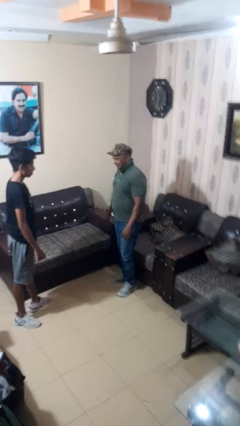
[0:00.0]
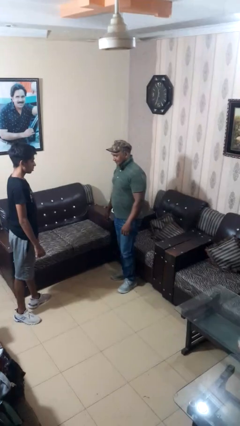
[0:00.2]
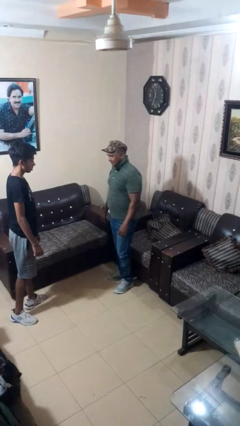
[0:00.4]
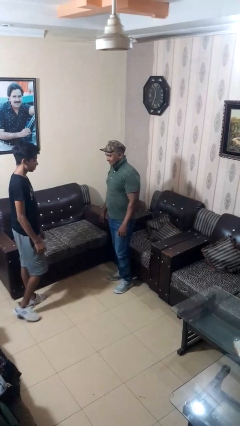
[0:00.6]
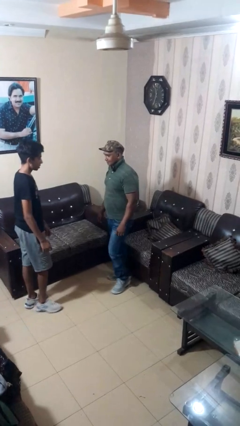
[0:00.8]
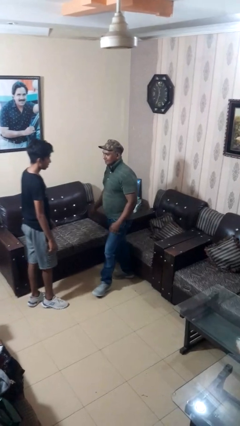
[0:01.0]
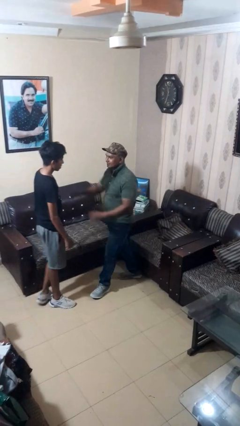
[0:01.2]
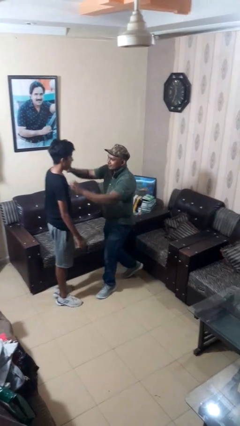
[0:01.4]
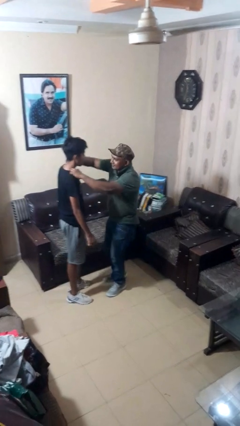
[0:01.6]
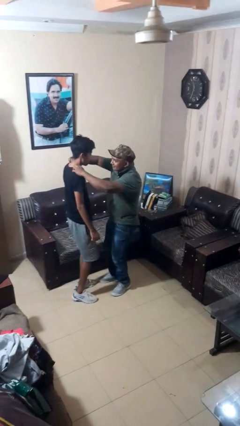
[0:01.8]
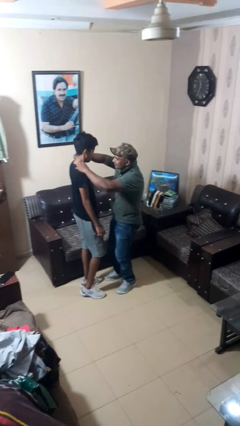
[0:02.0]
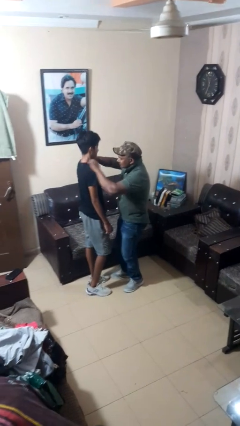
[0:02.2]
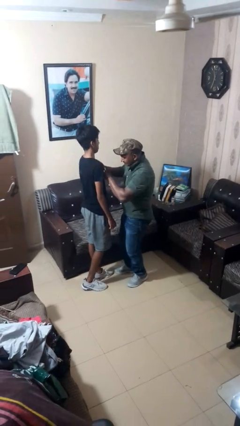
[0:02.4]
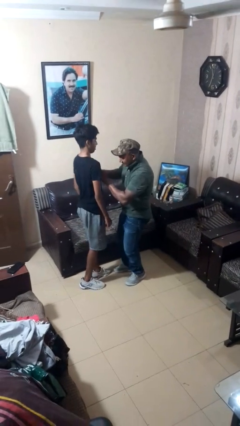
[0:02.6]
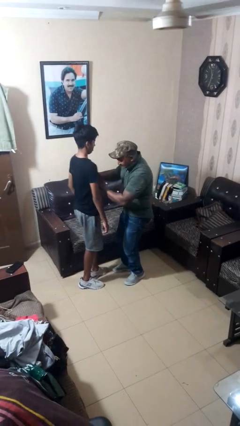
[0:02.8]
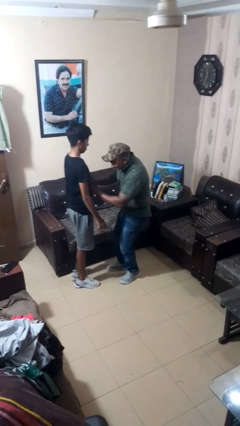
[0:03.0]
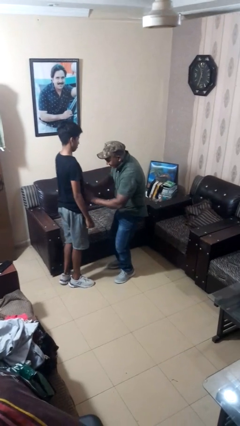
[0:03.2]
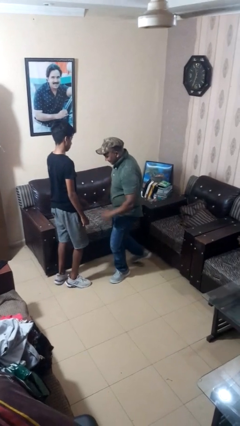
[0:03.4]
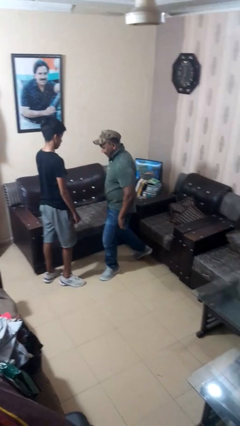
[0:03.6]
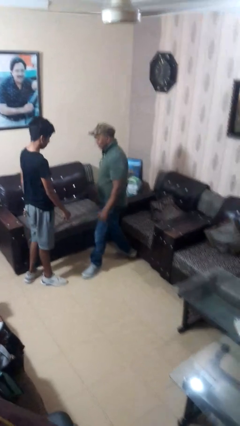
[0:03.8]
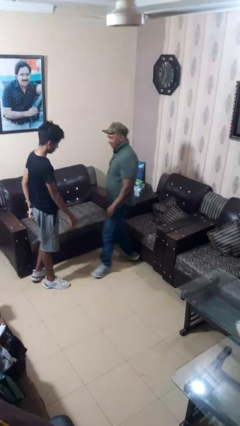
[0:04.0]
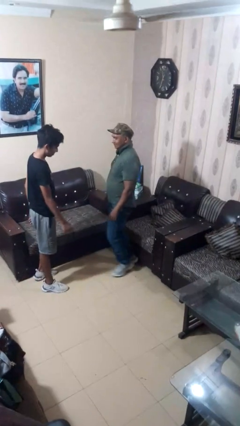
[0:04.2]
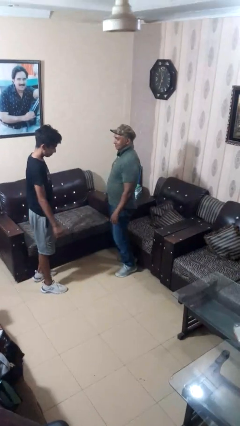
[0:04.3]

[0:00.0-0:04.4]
person tickles person

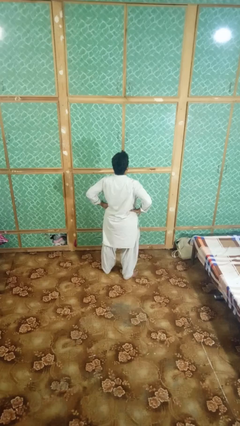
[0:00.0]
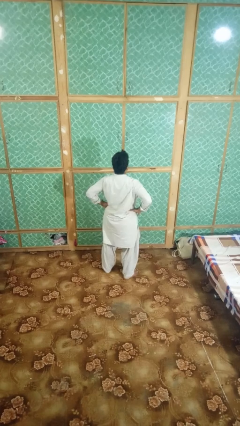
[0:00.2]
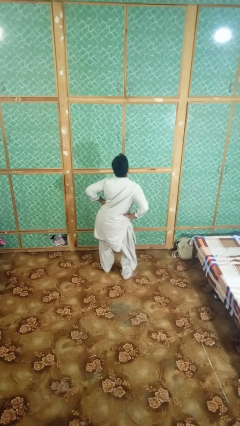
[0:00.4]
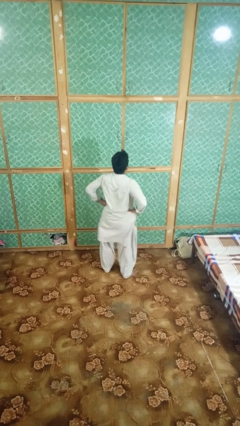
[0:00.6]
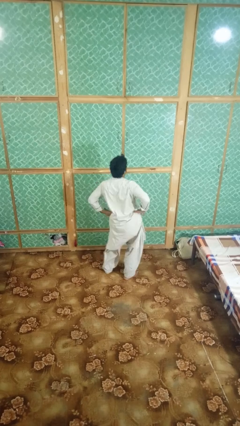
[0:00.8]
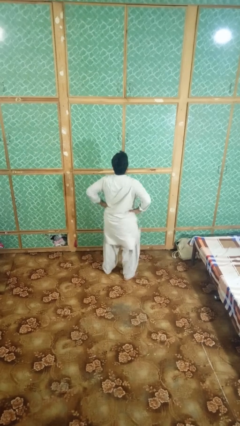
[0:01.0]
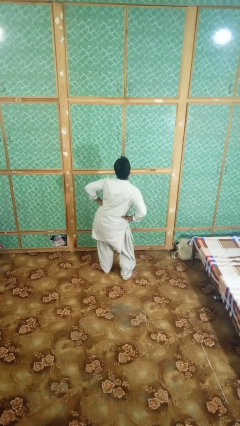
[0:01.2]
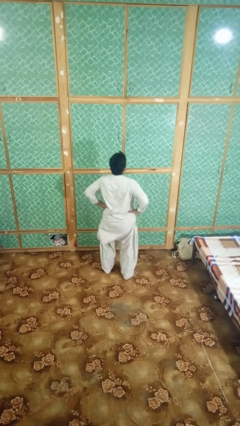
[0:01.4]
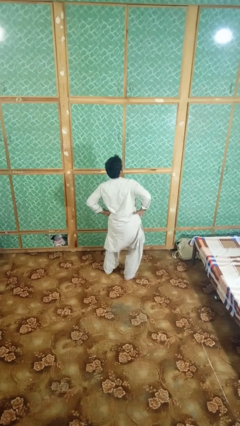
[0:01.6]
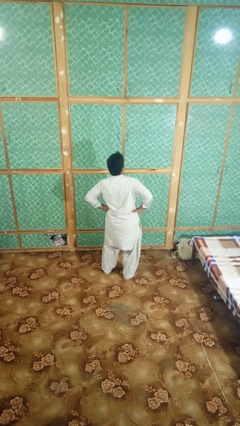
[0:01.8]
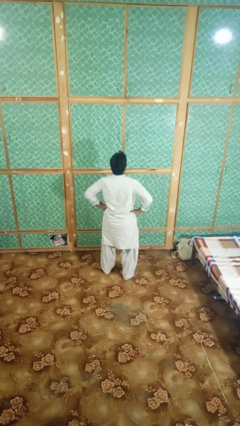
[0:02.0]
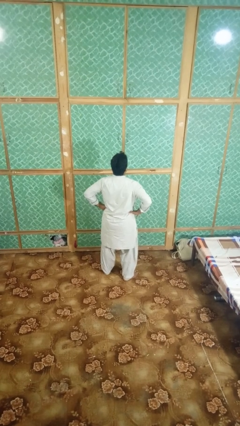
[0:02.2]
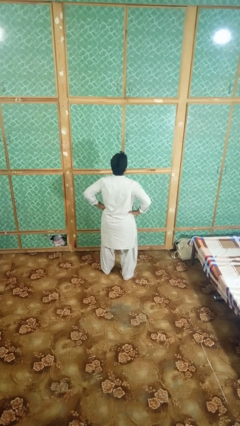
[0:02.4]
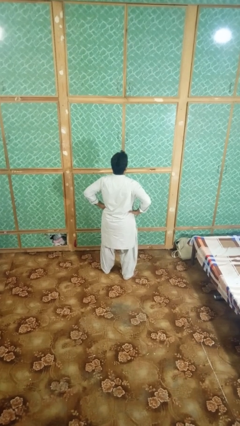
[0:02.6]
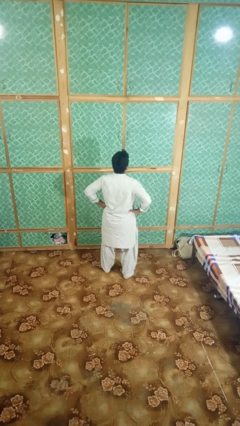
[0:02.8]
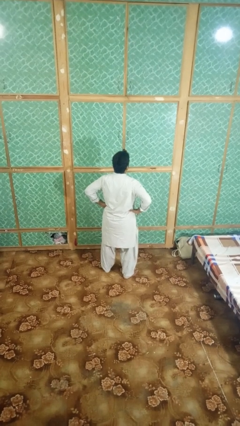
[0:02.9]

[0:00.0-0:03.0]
person wiggles hips

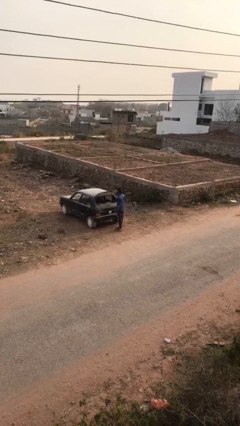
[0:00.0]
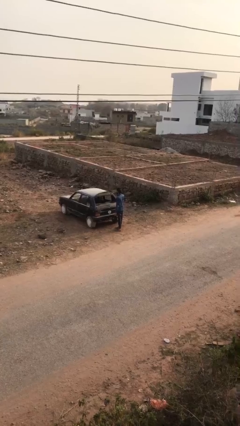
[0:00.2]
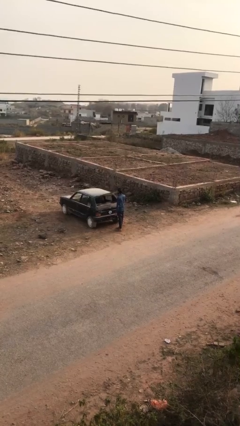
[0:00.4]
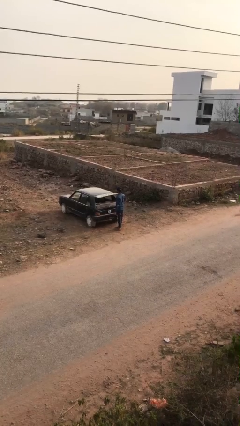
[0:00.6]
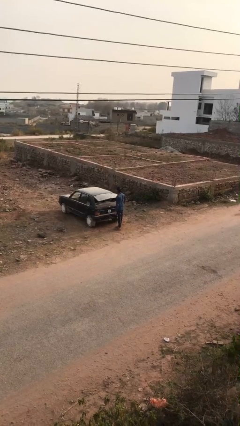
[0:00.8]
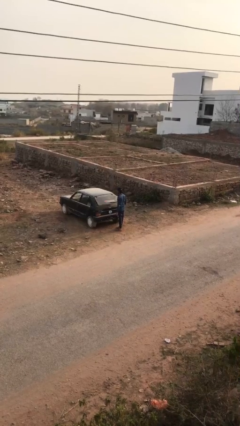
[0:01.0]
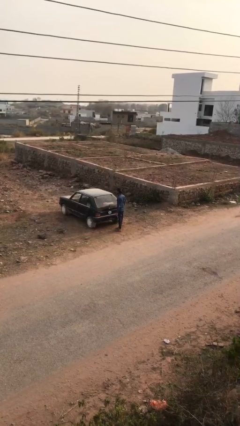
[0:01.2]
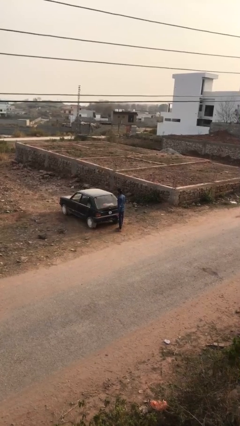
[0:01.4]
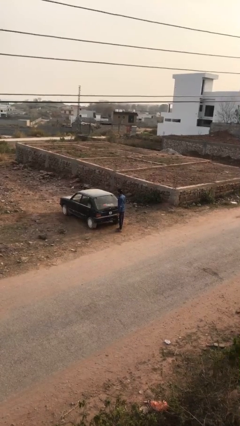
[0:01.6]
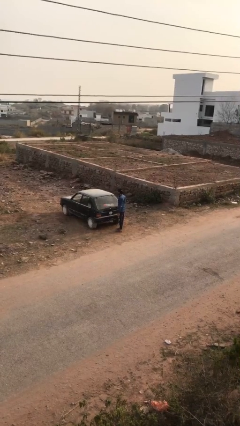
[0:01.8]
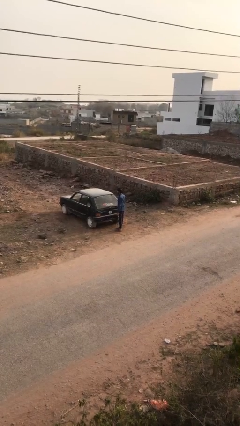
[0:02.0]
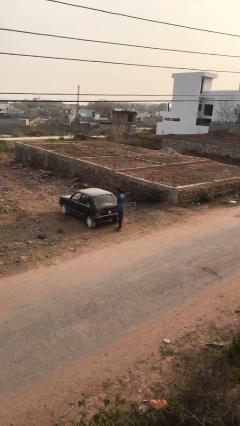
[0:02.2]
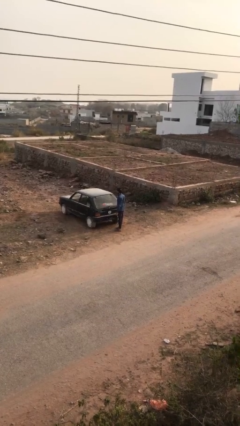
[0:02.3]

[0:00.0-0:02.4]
person closes car trunk

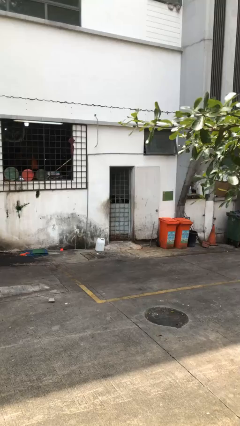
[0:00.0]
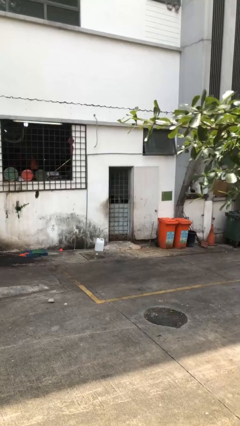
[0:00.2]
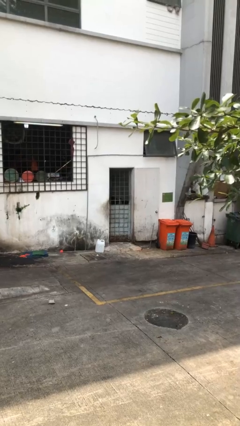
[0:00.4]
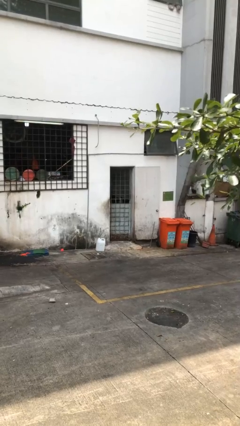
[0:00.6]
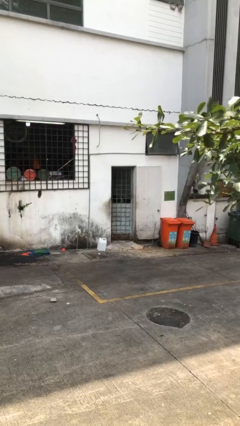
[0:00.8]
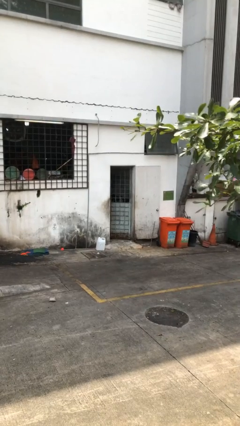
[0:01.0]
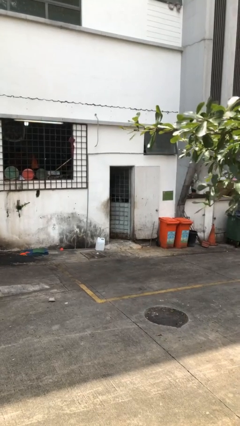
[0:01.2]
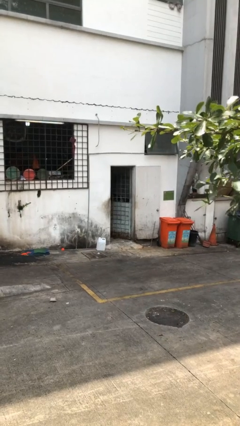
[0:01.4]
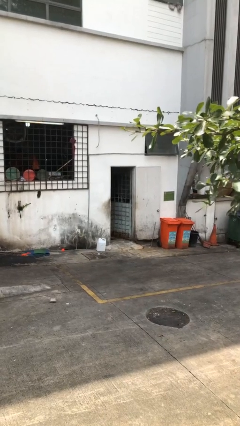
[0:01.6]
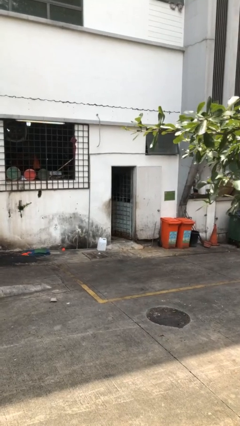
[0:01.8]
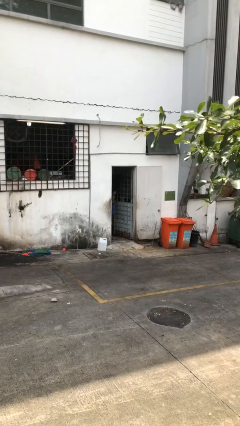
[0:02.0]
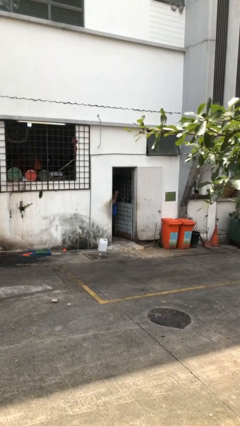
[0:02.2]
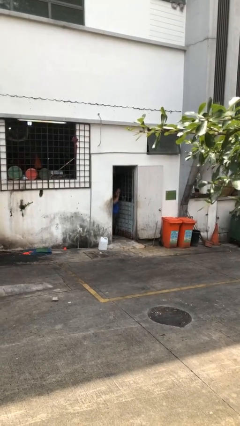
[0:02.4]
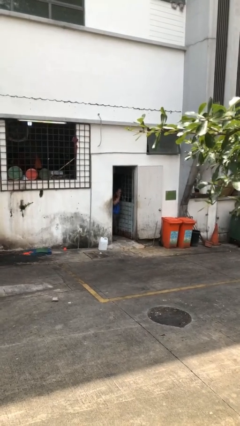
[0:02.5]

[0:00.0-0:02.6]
person opens facility door

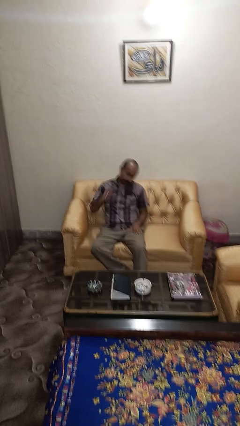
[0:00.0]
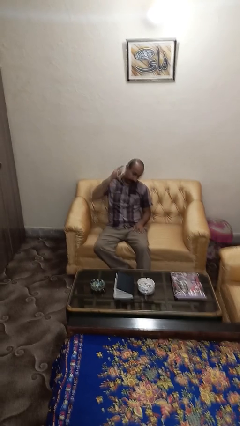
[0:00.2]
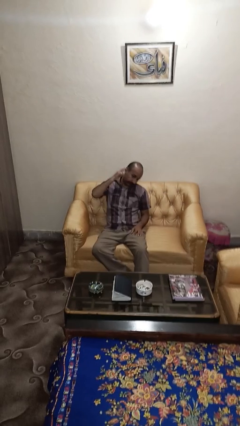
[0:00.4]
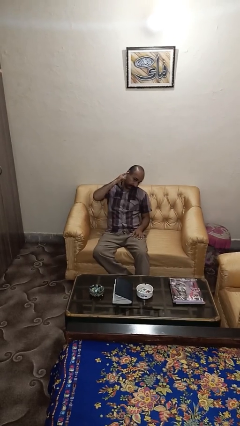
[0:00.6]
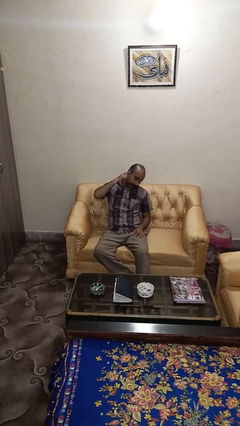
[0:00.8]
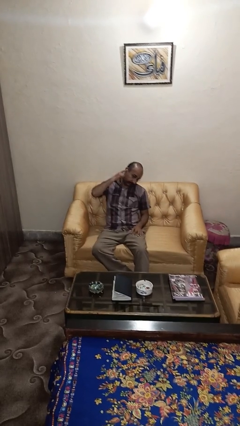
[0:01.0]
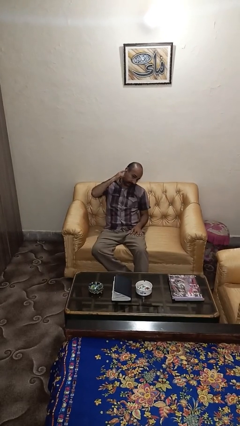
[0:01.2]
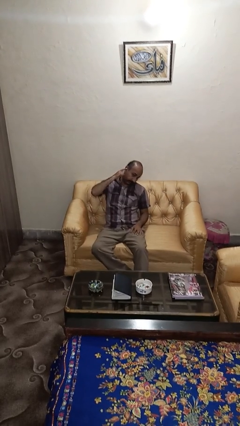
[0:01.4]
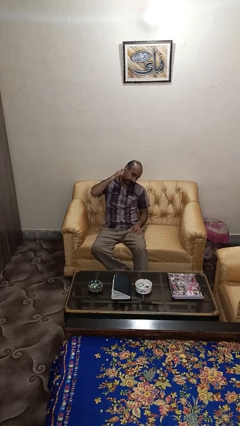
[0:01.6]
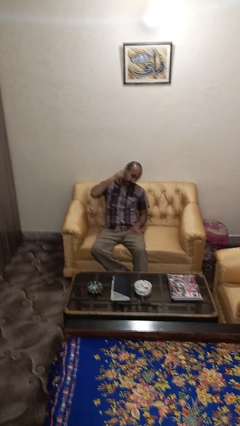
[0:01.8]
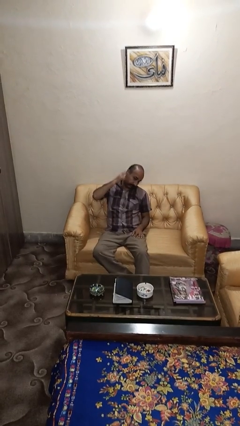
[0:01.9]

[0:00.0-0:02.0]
person gestures listen closely

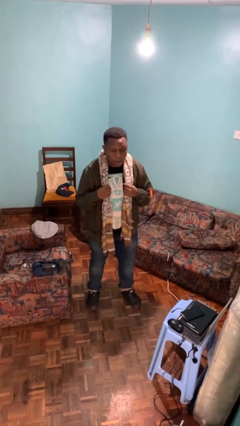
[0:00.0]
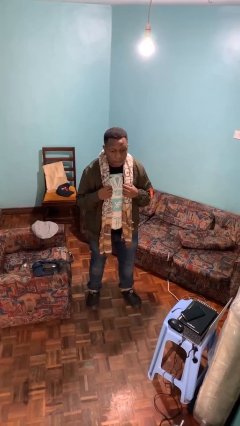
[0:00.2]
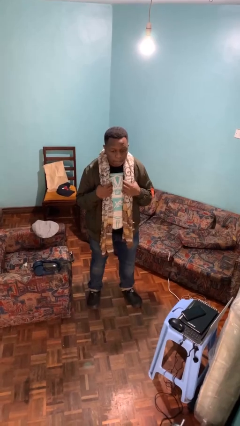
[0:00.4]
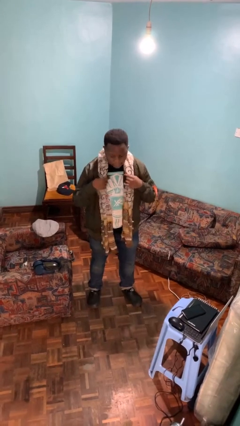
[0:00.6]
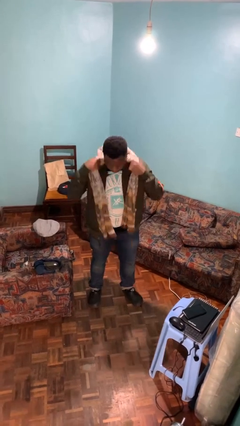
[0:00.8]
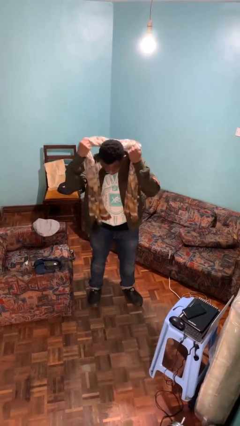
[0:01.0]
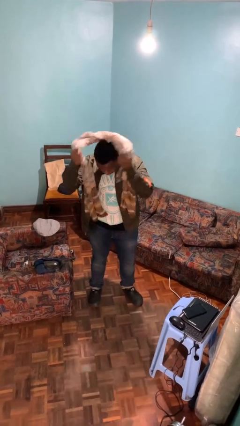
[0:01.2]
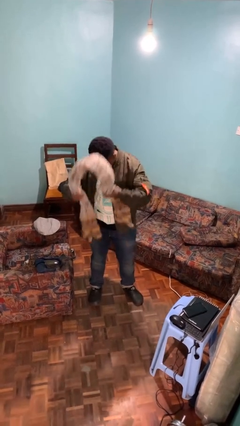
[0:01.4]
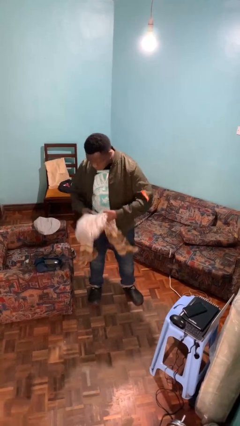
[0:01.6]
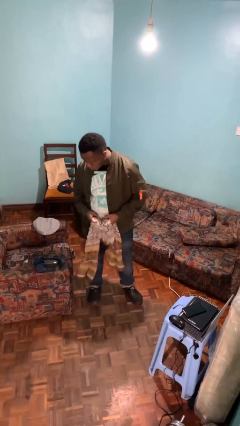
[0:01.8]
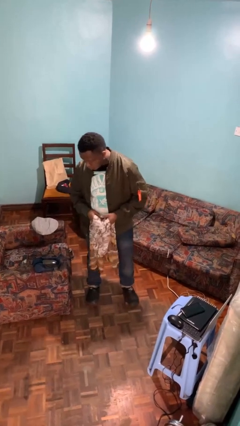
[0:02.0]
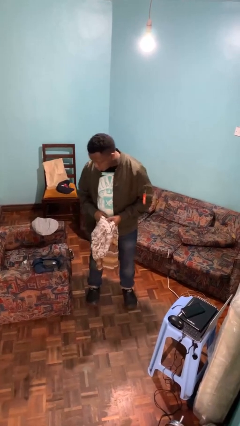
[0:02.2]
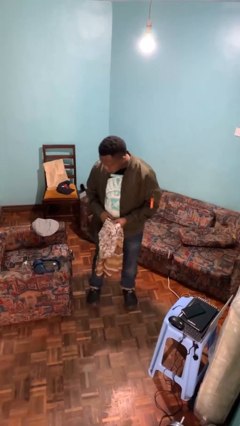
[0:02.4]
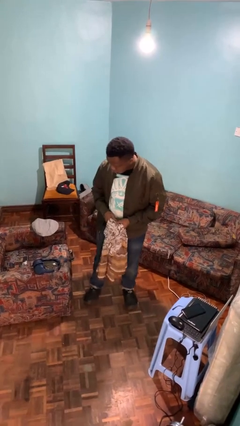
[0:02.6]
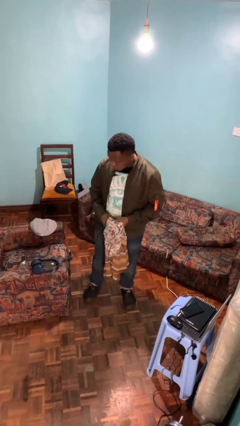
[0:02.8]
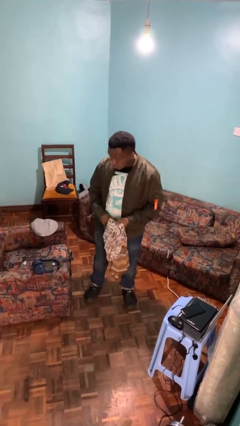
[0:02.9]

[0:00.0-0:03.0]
person takes off scarf

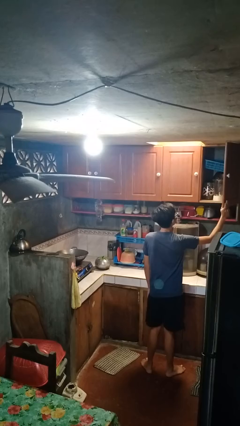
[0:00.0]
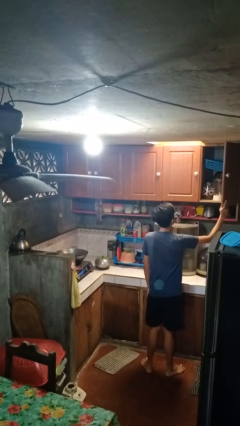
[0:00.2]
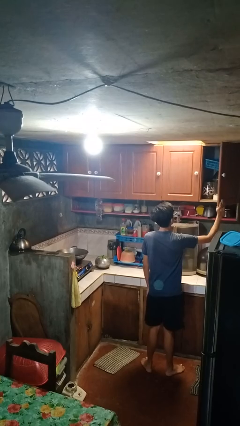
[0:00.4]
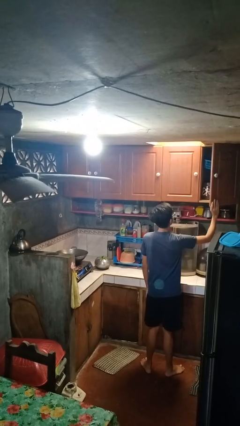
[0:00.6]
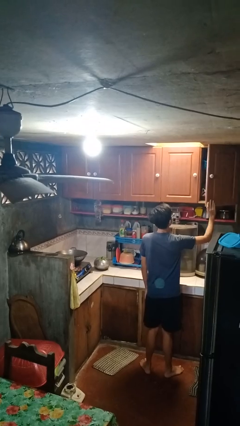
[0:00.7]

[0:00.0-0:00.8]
person closes cabinet
